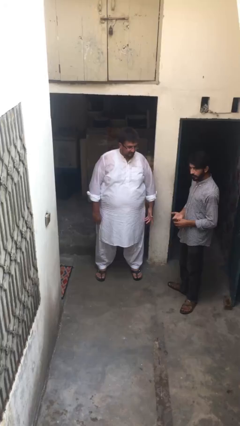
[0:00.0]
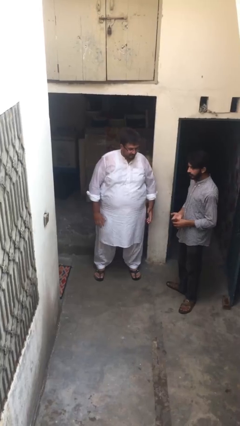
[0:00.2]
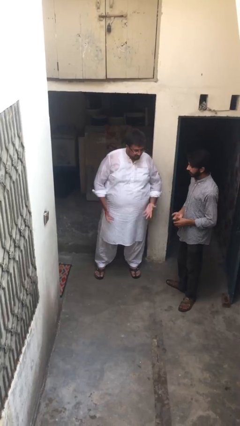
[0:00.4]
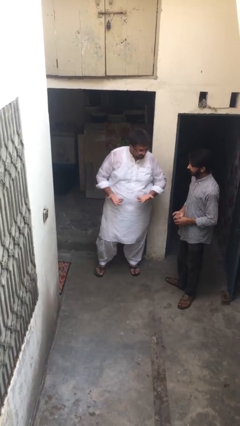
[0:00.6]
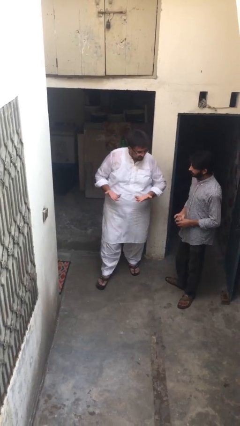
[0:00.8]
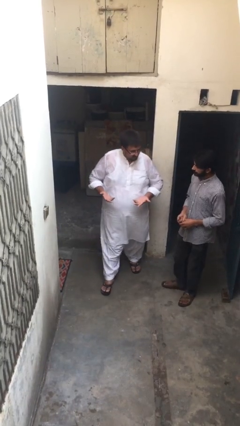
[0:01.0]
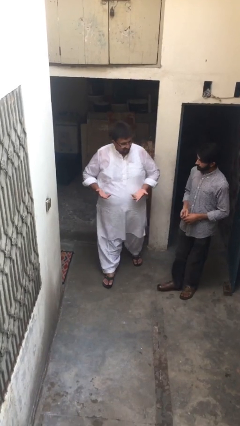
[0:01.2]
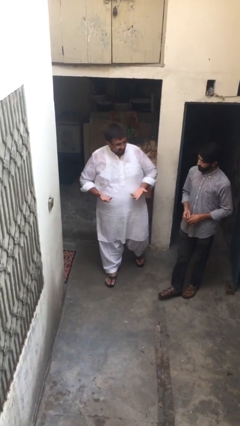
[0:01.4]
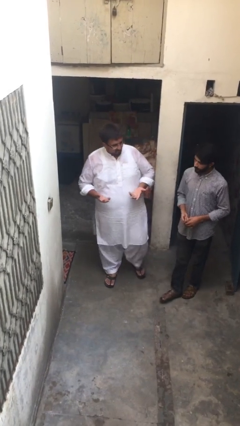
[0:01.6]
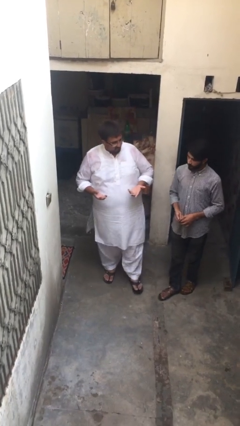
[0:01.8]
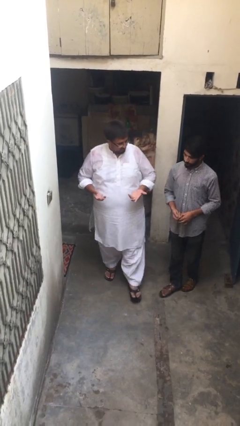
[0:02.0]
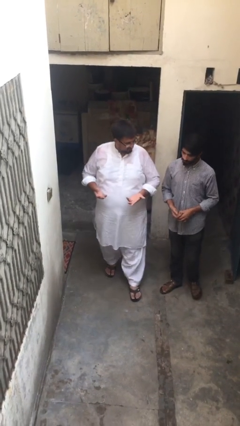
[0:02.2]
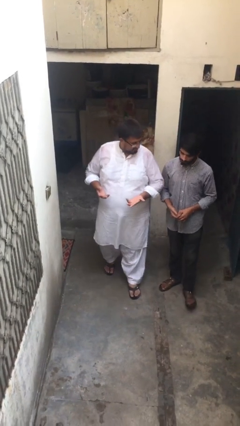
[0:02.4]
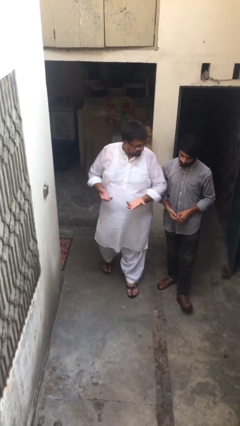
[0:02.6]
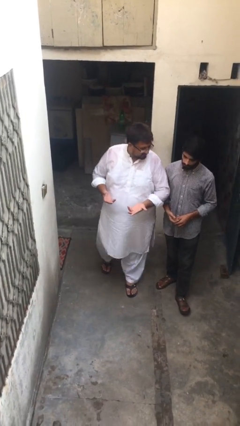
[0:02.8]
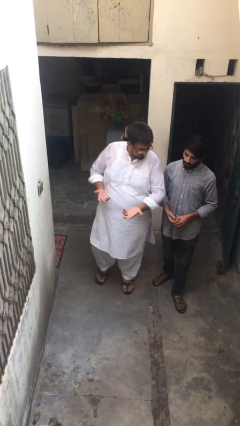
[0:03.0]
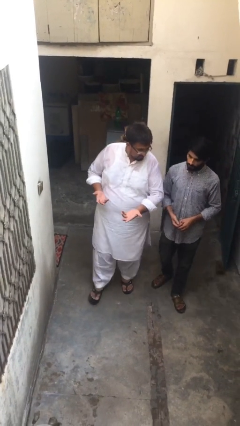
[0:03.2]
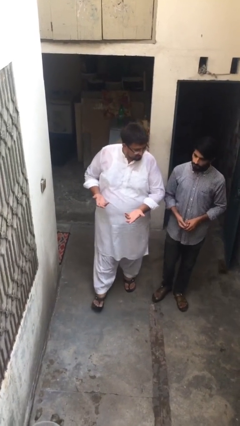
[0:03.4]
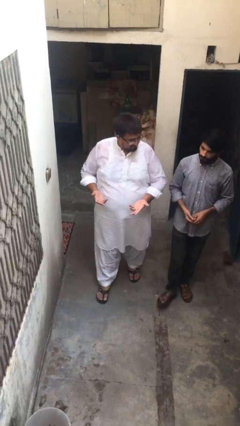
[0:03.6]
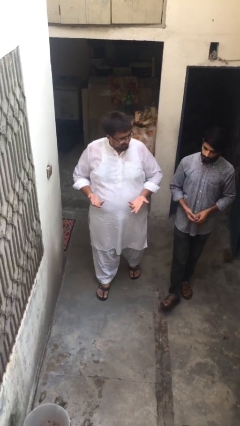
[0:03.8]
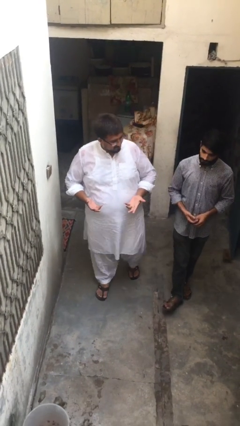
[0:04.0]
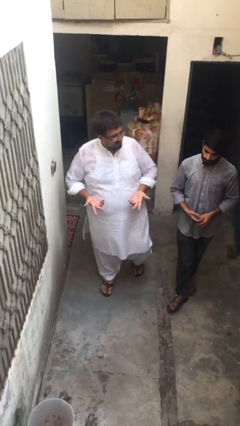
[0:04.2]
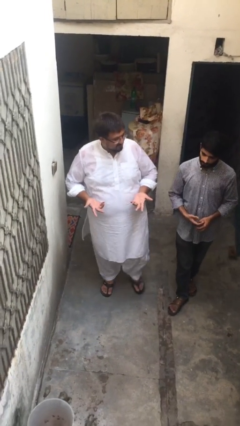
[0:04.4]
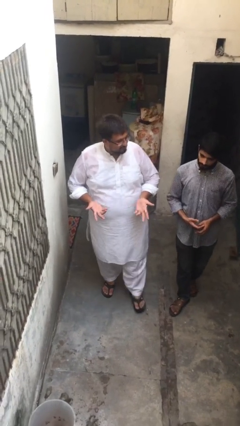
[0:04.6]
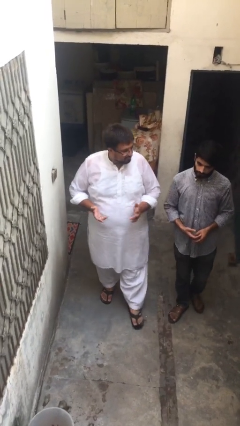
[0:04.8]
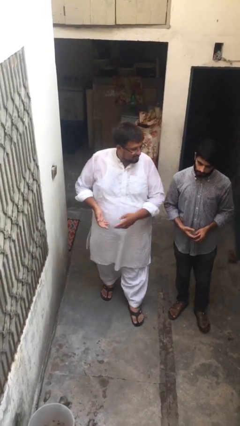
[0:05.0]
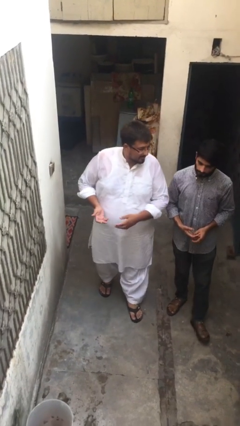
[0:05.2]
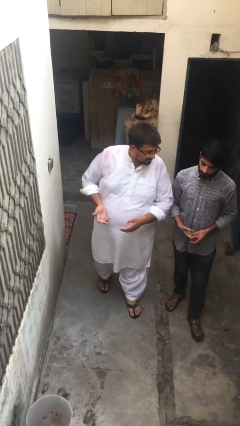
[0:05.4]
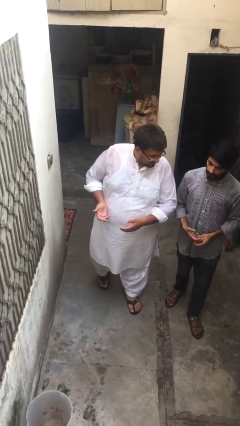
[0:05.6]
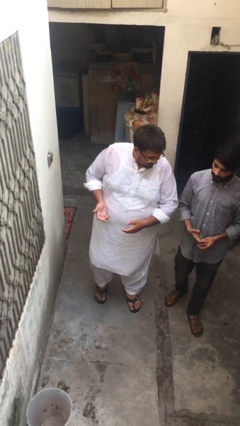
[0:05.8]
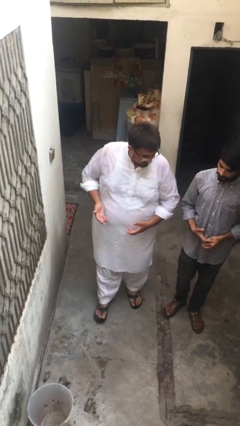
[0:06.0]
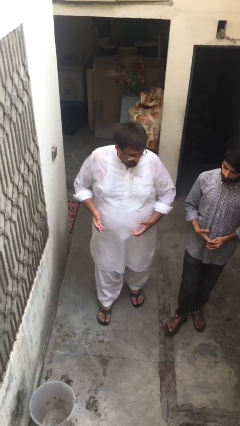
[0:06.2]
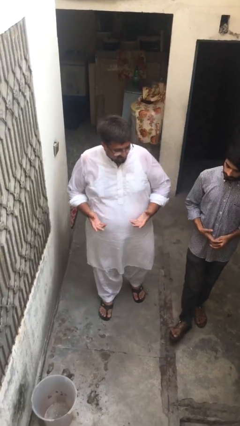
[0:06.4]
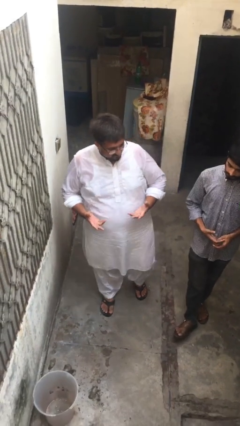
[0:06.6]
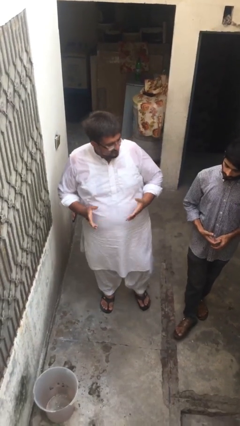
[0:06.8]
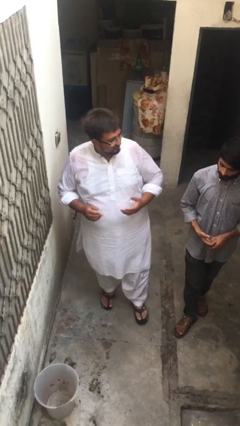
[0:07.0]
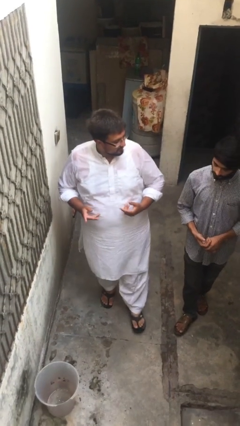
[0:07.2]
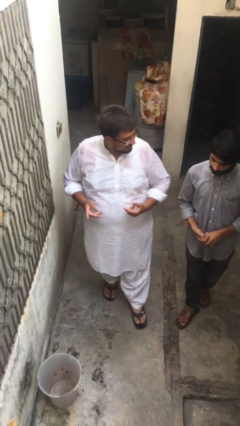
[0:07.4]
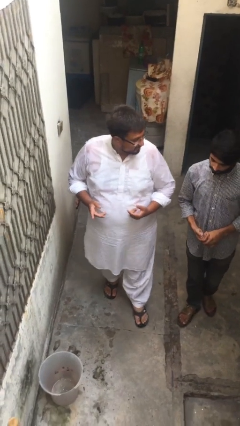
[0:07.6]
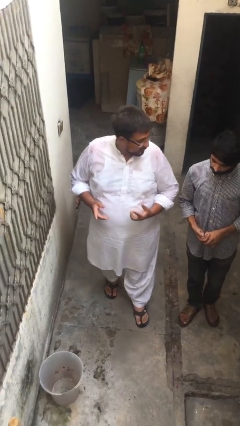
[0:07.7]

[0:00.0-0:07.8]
person talks to person

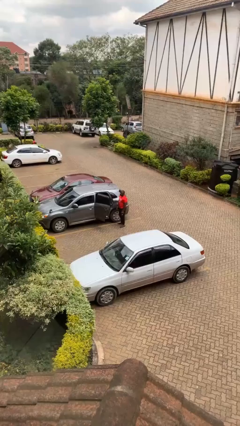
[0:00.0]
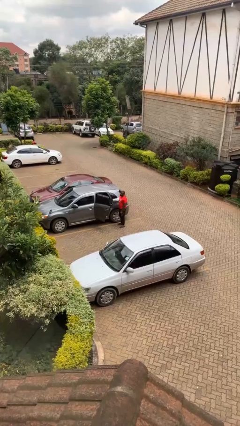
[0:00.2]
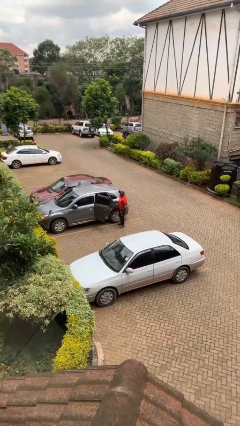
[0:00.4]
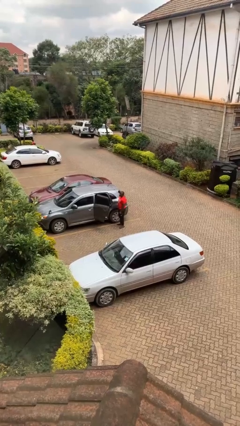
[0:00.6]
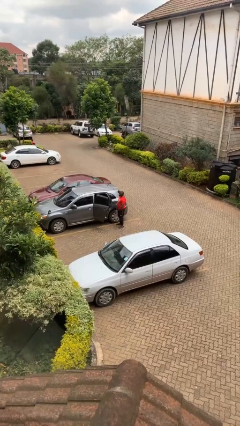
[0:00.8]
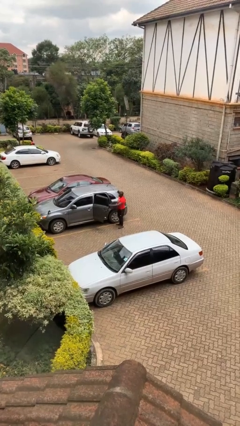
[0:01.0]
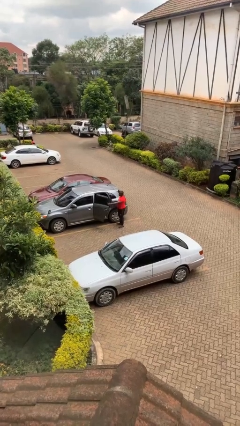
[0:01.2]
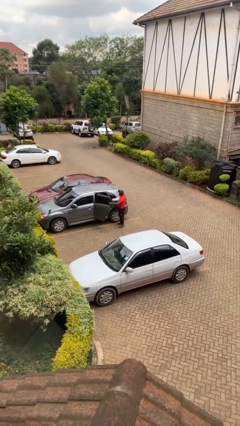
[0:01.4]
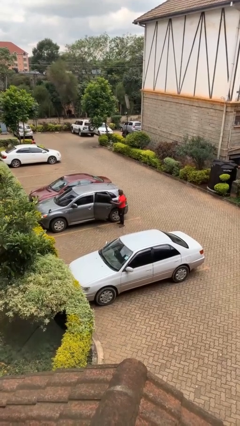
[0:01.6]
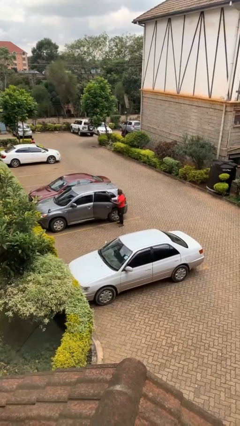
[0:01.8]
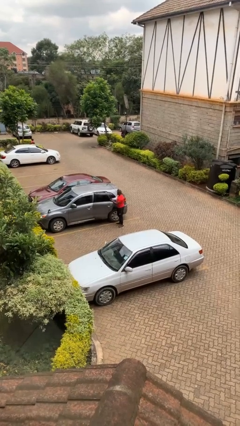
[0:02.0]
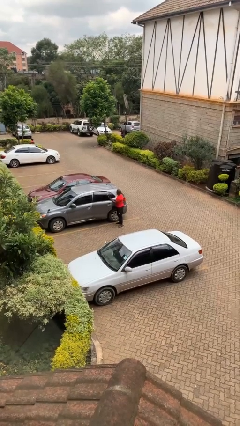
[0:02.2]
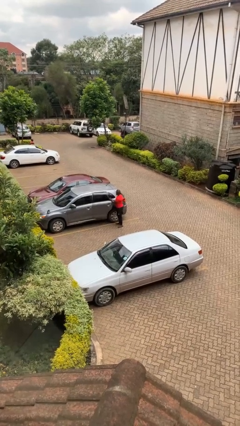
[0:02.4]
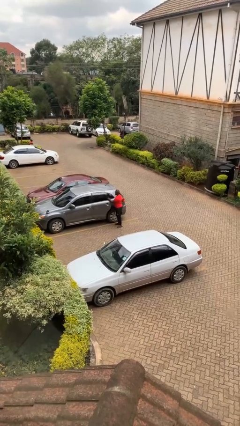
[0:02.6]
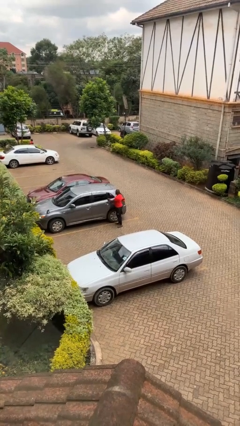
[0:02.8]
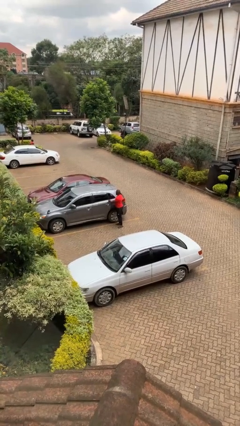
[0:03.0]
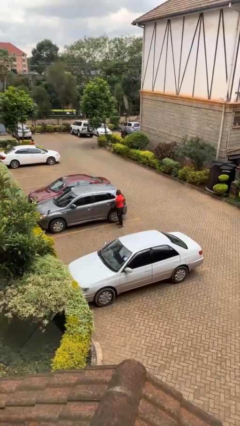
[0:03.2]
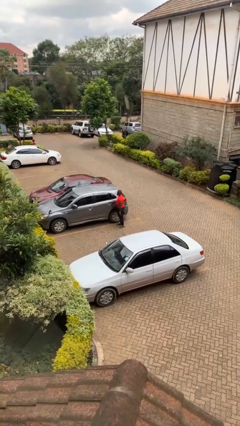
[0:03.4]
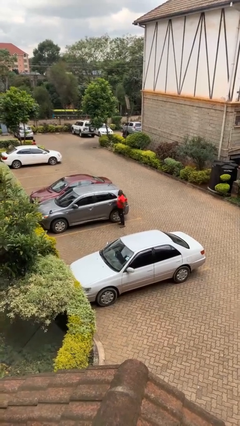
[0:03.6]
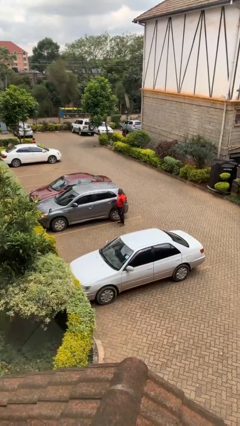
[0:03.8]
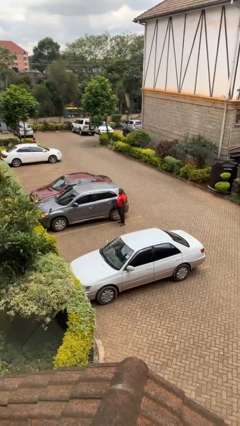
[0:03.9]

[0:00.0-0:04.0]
person closes car door

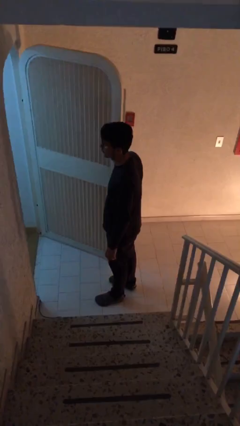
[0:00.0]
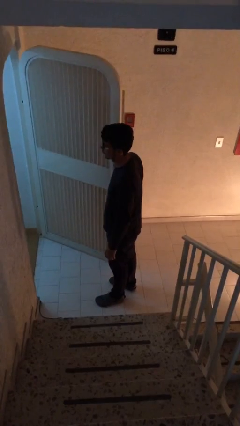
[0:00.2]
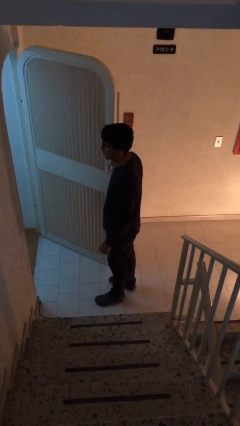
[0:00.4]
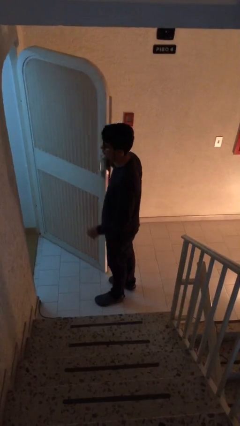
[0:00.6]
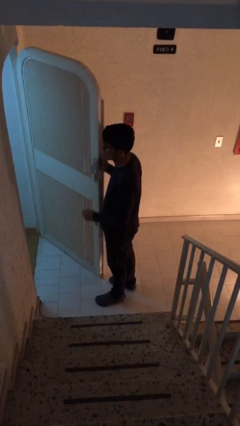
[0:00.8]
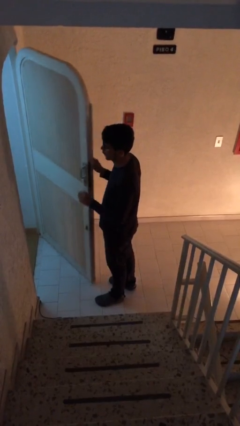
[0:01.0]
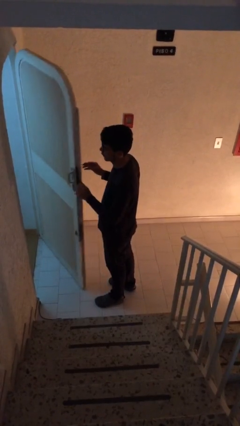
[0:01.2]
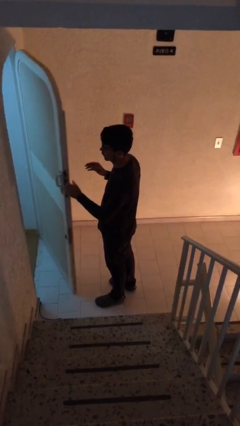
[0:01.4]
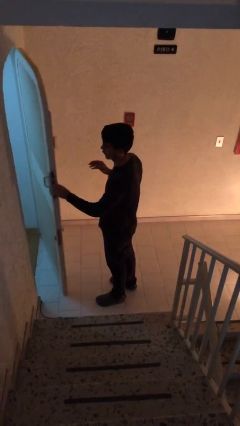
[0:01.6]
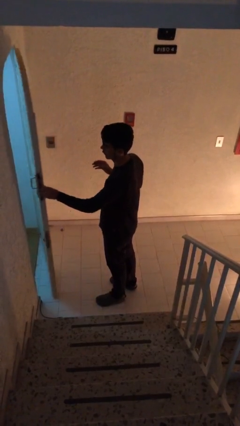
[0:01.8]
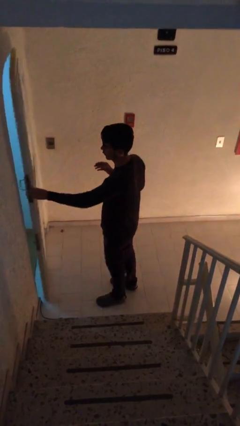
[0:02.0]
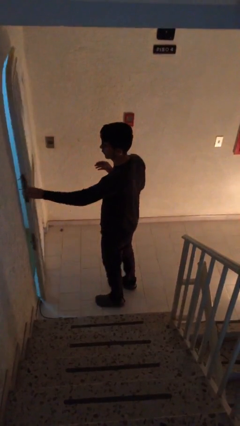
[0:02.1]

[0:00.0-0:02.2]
person closes facility door

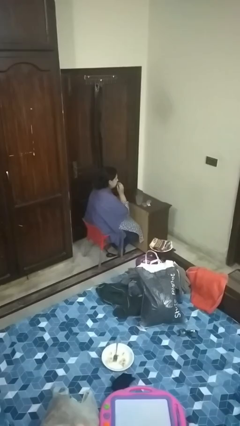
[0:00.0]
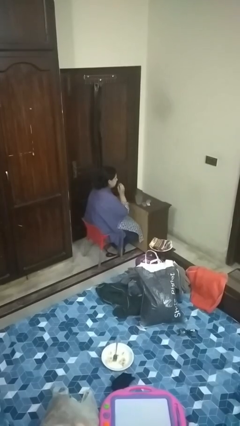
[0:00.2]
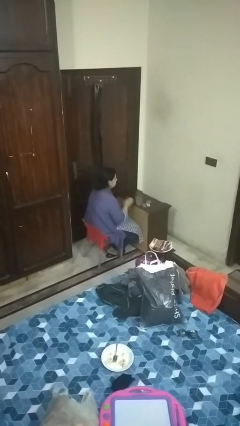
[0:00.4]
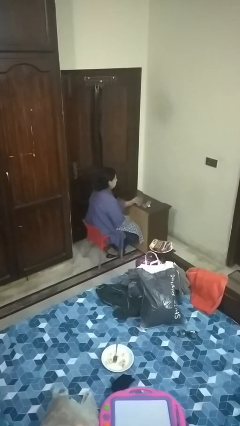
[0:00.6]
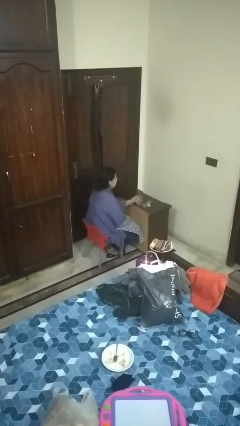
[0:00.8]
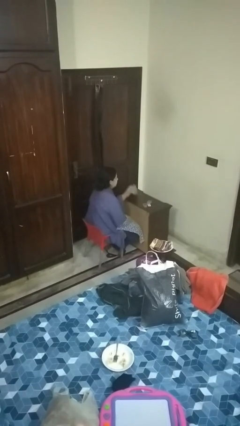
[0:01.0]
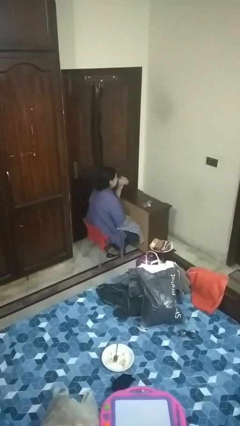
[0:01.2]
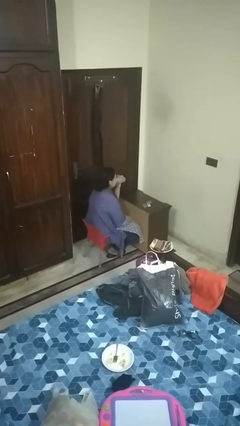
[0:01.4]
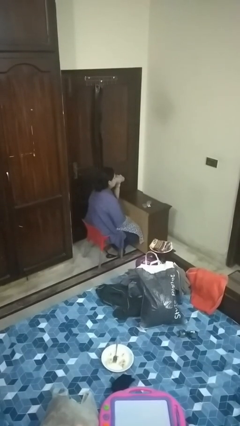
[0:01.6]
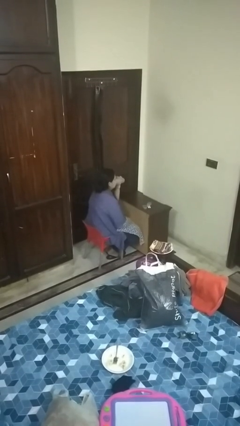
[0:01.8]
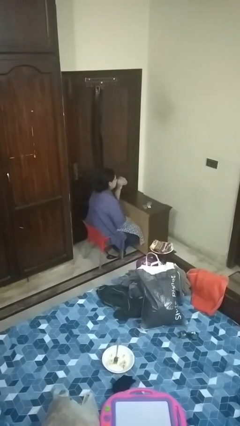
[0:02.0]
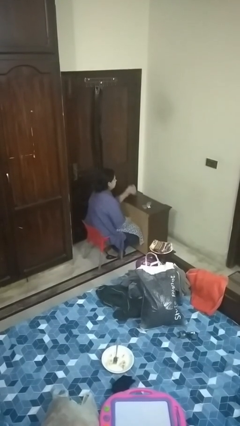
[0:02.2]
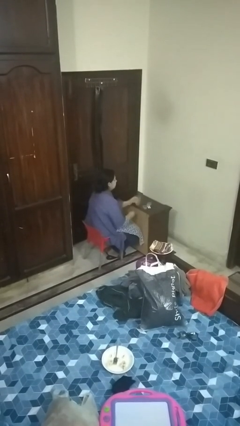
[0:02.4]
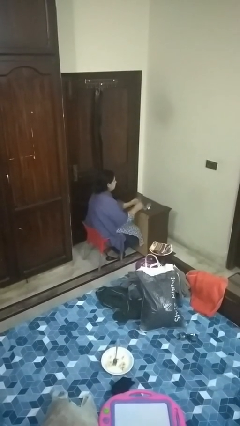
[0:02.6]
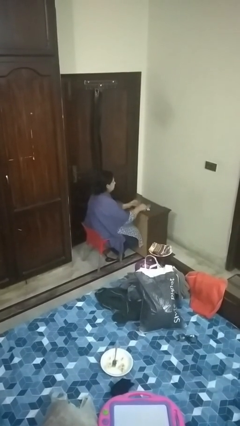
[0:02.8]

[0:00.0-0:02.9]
person drinks from cup

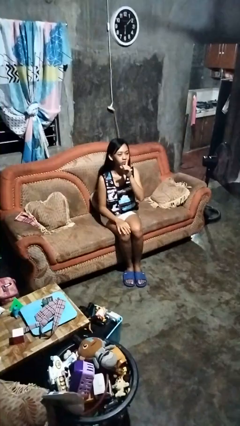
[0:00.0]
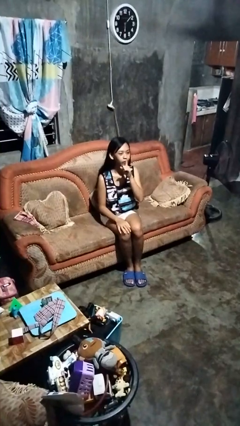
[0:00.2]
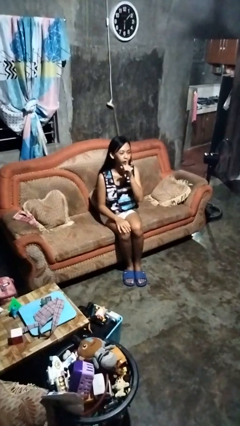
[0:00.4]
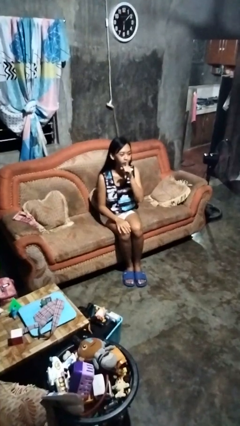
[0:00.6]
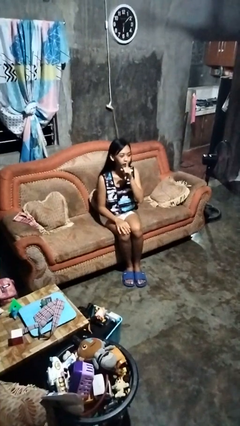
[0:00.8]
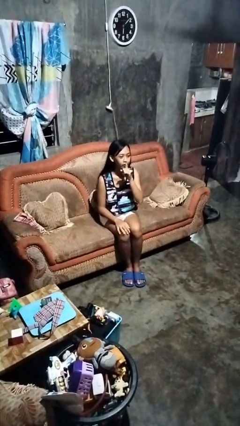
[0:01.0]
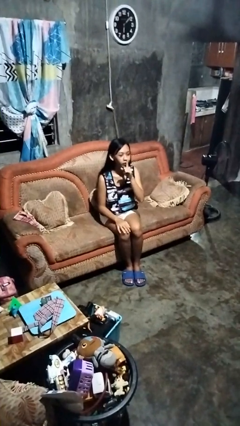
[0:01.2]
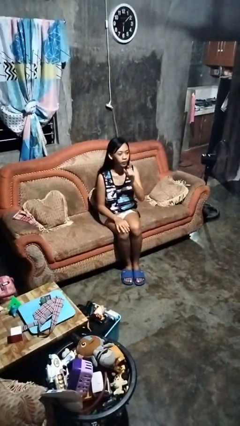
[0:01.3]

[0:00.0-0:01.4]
person gestures be quiet
